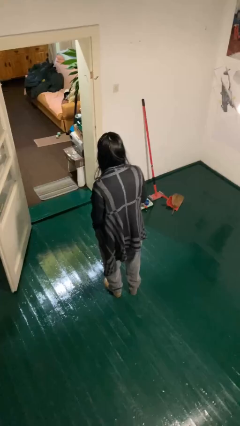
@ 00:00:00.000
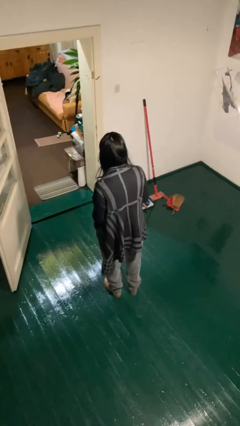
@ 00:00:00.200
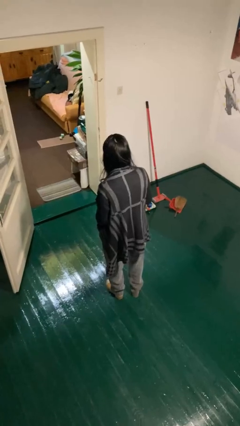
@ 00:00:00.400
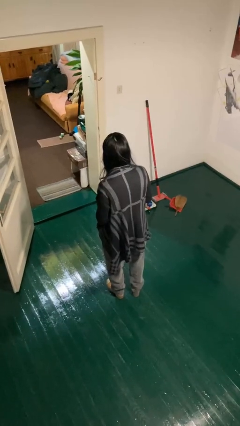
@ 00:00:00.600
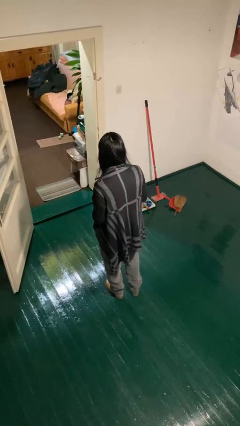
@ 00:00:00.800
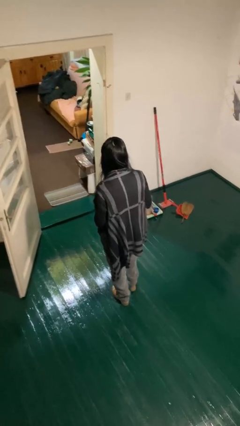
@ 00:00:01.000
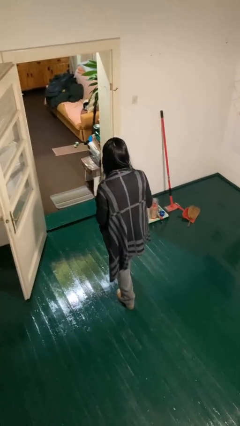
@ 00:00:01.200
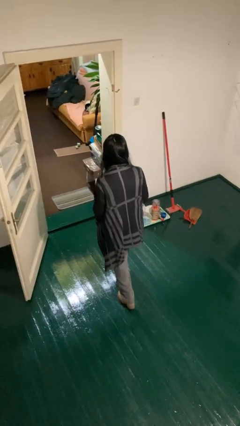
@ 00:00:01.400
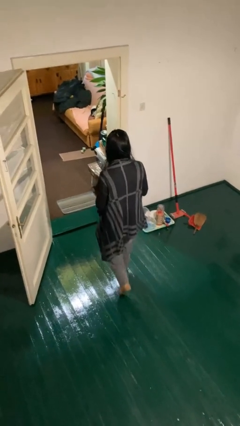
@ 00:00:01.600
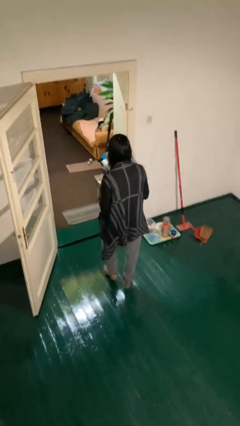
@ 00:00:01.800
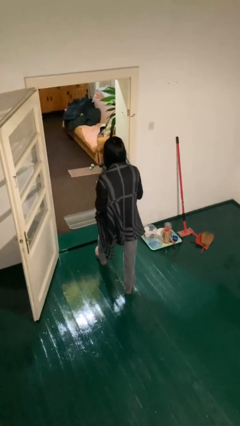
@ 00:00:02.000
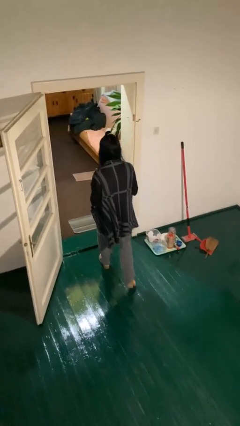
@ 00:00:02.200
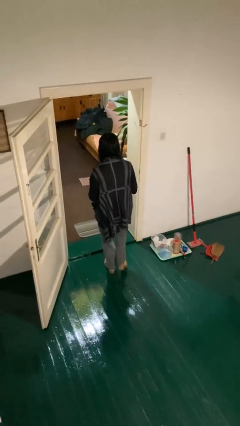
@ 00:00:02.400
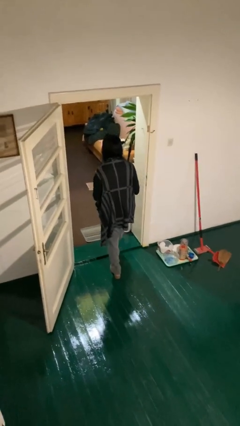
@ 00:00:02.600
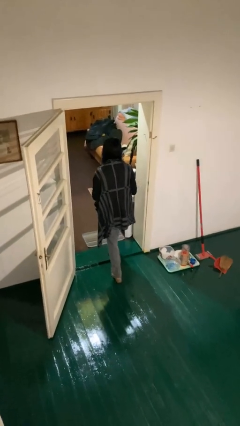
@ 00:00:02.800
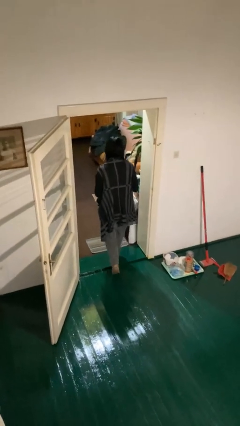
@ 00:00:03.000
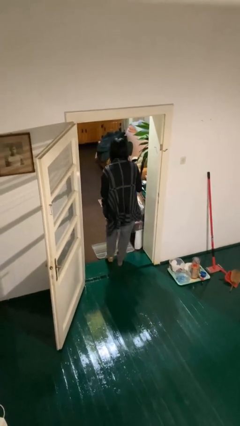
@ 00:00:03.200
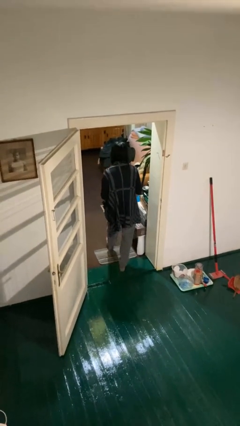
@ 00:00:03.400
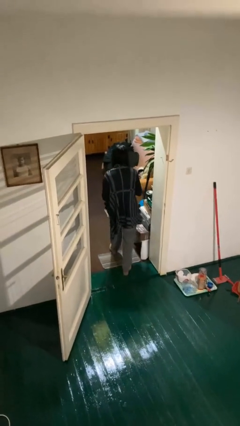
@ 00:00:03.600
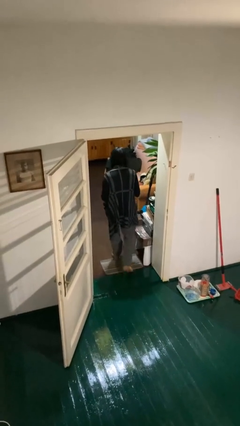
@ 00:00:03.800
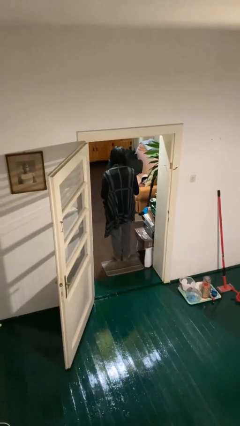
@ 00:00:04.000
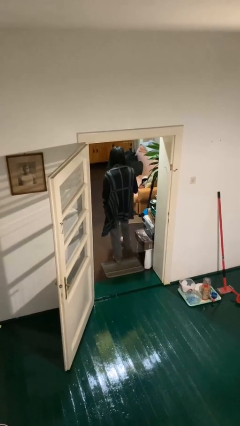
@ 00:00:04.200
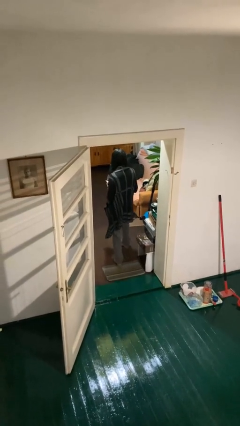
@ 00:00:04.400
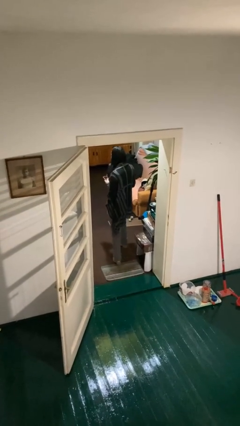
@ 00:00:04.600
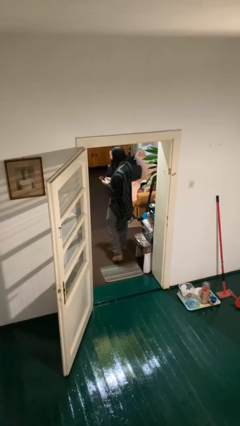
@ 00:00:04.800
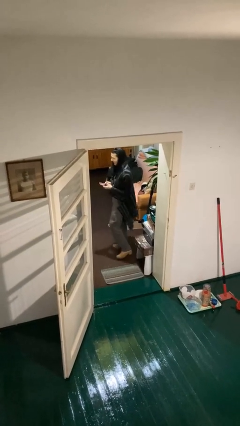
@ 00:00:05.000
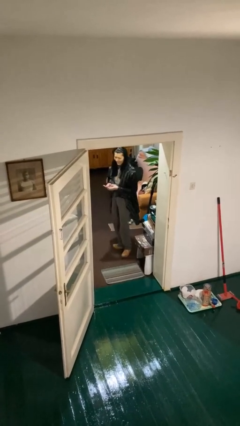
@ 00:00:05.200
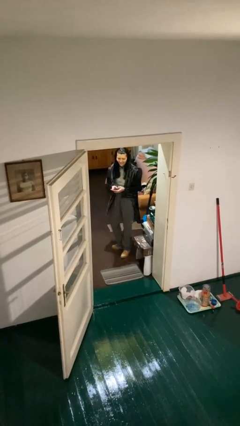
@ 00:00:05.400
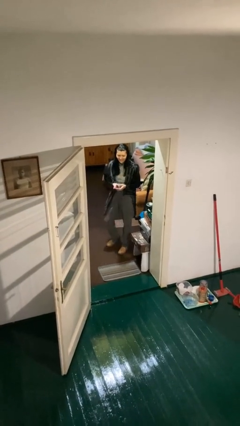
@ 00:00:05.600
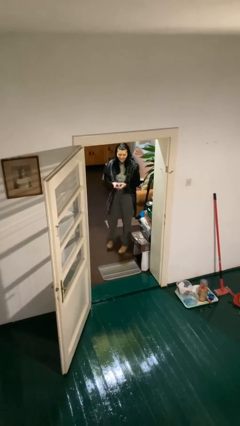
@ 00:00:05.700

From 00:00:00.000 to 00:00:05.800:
person exits scene through structure

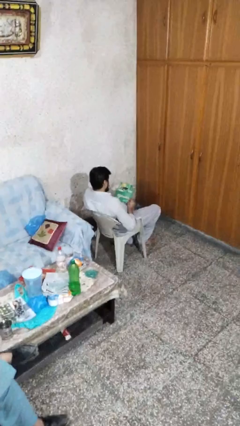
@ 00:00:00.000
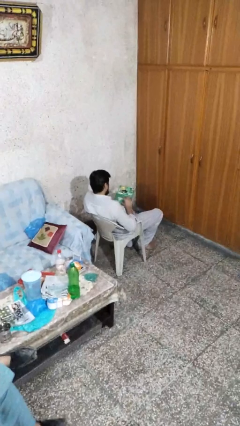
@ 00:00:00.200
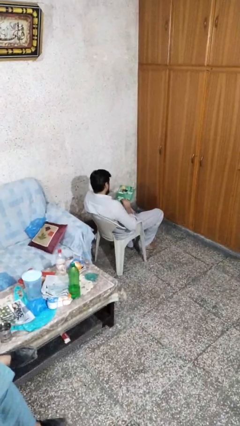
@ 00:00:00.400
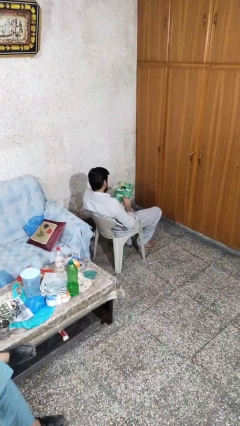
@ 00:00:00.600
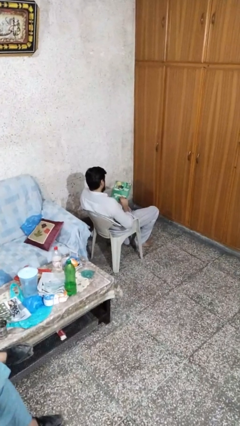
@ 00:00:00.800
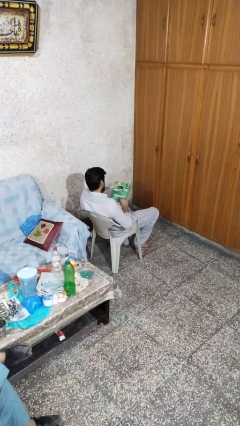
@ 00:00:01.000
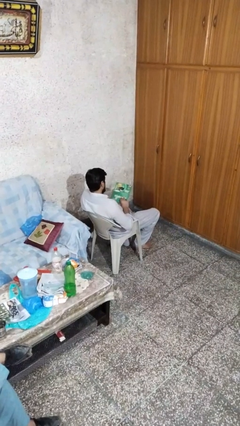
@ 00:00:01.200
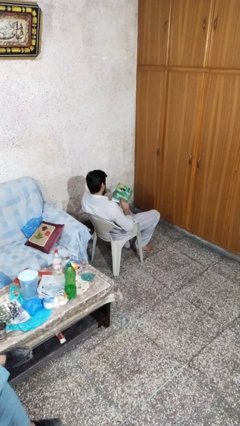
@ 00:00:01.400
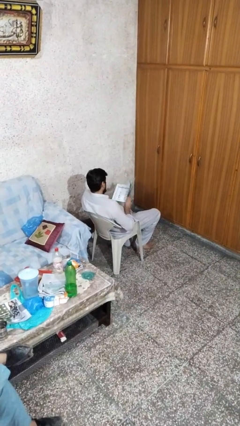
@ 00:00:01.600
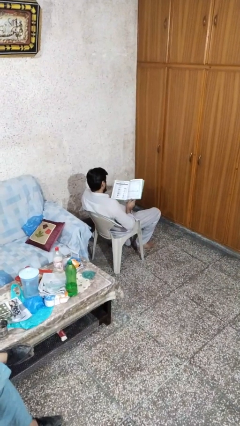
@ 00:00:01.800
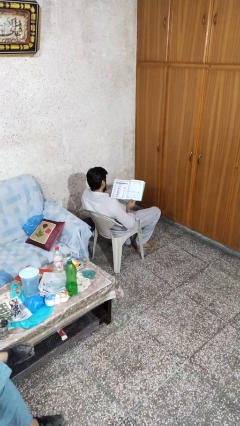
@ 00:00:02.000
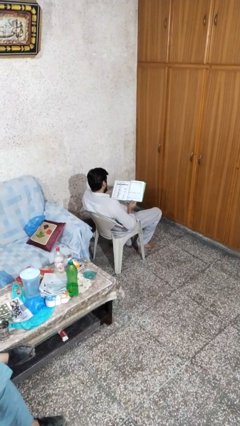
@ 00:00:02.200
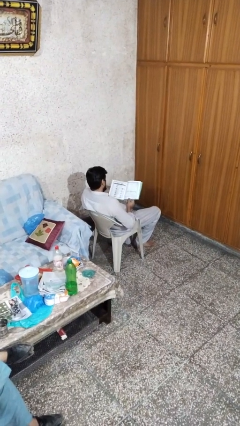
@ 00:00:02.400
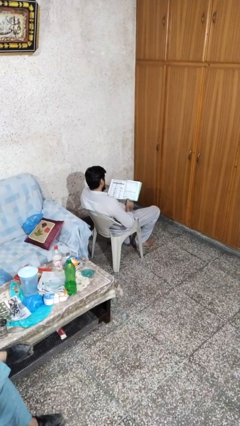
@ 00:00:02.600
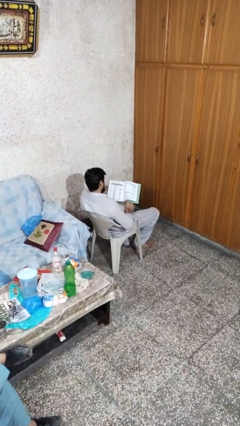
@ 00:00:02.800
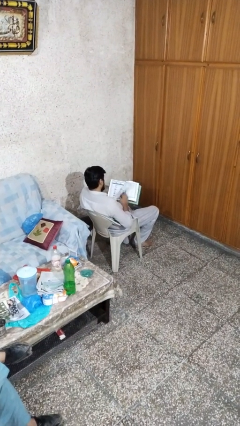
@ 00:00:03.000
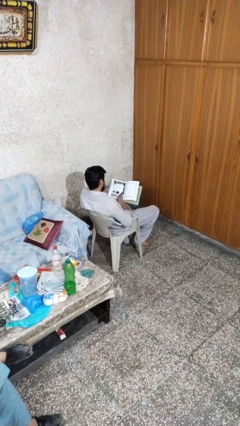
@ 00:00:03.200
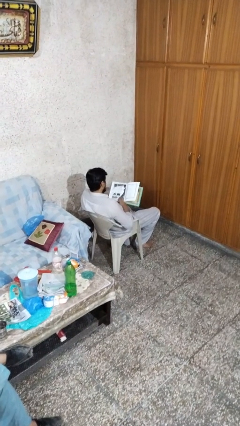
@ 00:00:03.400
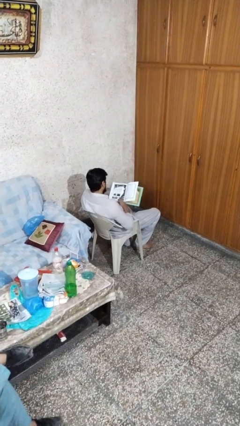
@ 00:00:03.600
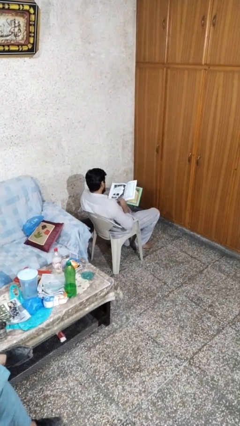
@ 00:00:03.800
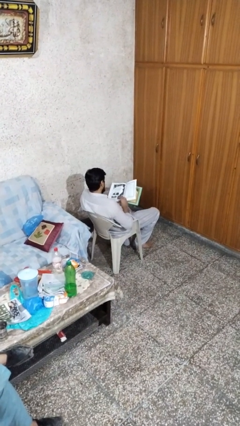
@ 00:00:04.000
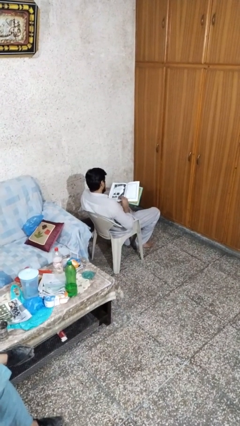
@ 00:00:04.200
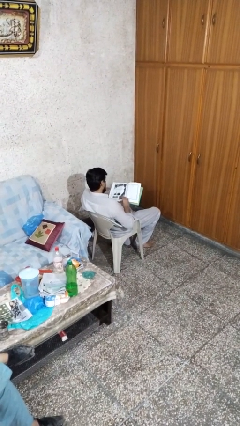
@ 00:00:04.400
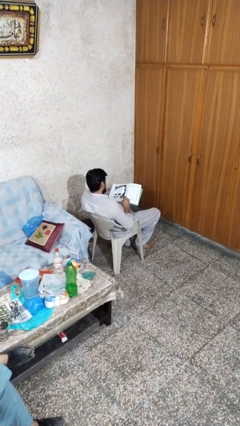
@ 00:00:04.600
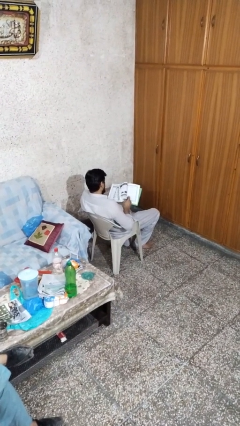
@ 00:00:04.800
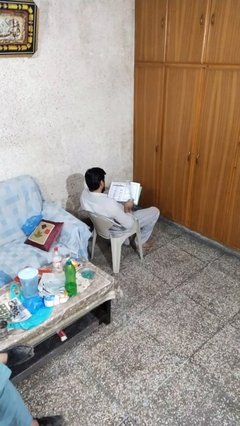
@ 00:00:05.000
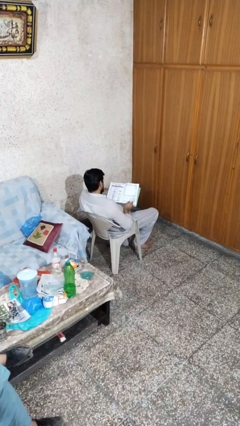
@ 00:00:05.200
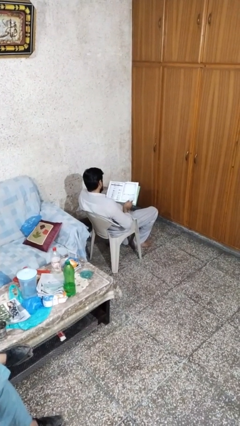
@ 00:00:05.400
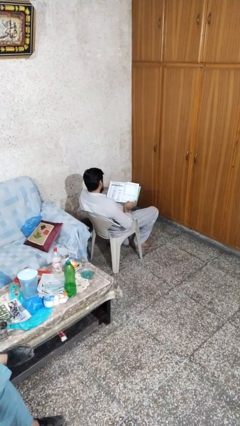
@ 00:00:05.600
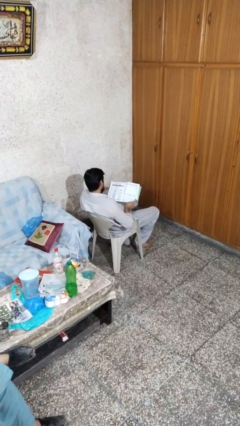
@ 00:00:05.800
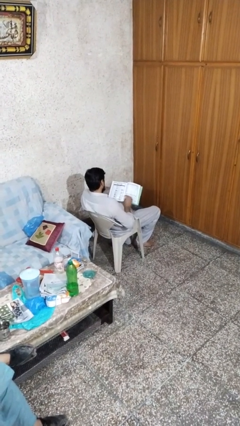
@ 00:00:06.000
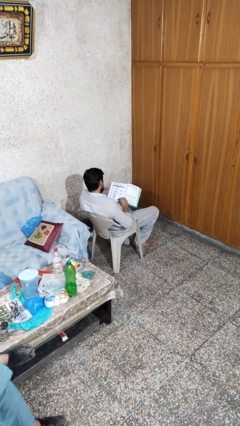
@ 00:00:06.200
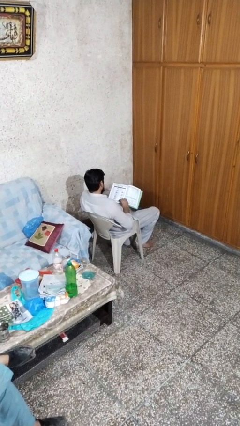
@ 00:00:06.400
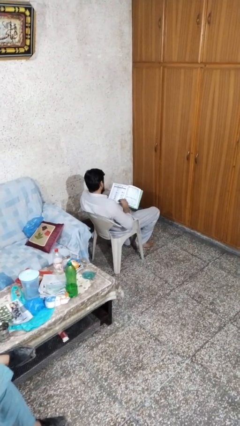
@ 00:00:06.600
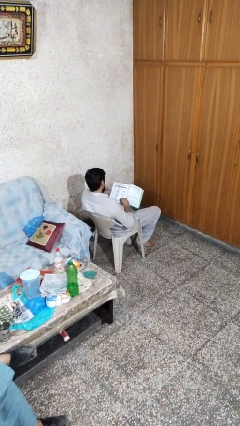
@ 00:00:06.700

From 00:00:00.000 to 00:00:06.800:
person reads book

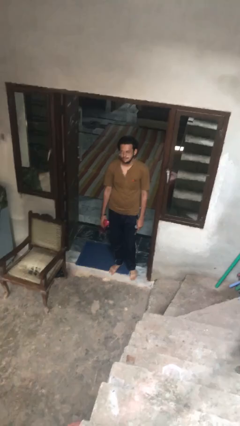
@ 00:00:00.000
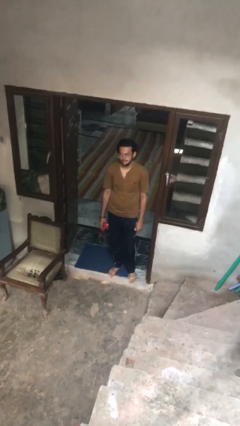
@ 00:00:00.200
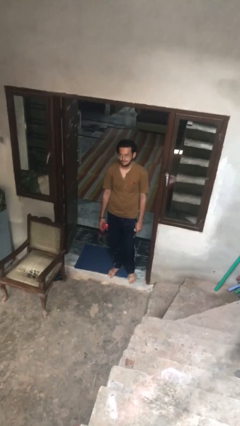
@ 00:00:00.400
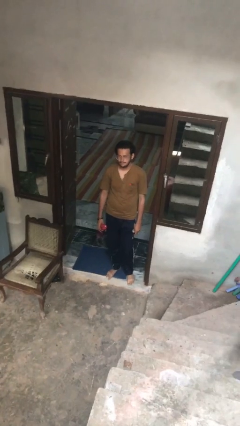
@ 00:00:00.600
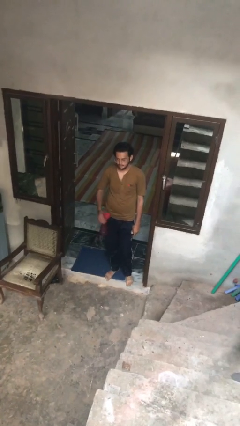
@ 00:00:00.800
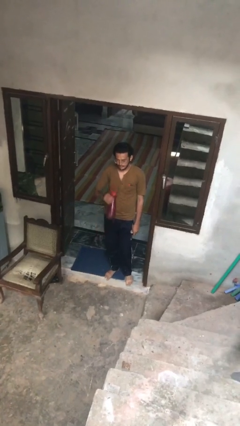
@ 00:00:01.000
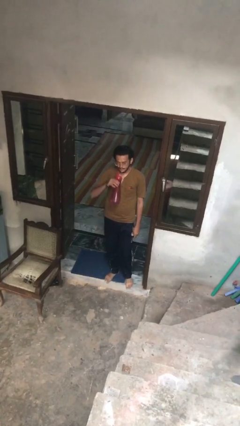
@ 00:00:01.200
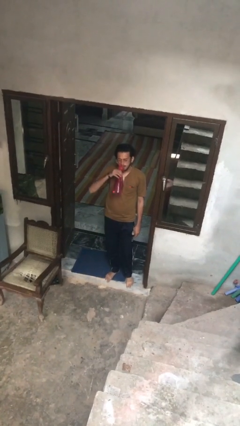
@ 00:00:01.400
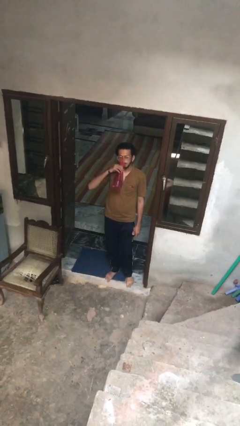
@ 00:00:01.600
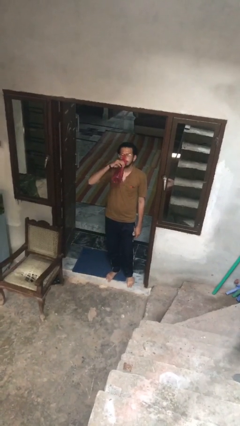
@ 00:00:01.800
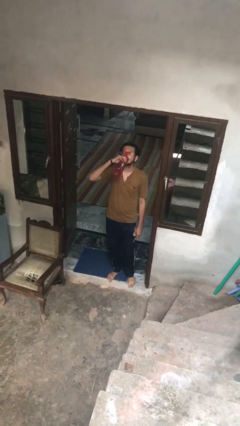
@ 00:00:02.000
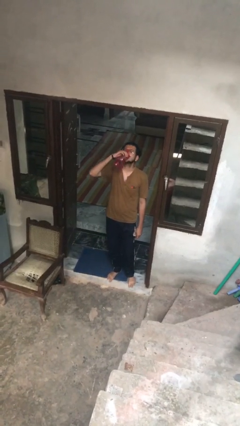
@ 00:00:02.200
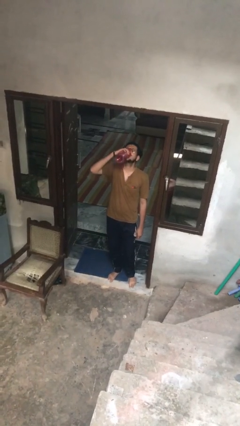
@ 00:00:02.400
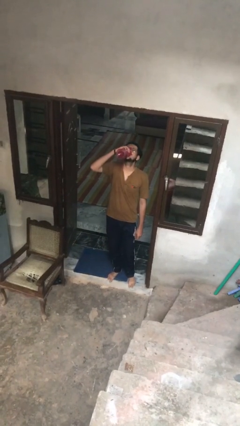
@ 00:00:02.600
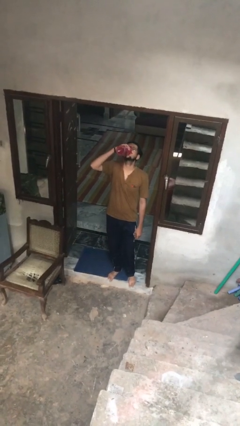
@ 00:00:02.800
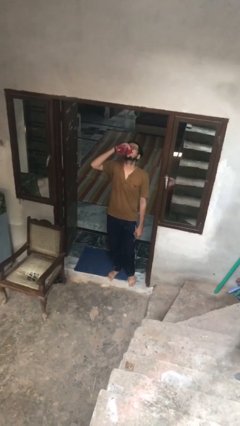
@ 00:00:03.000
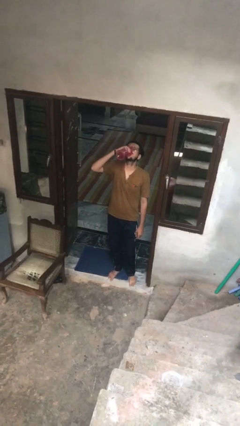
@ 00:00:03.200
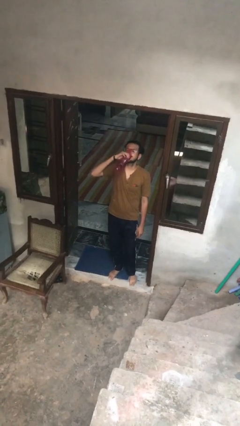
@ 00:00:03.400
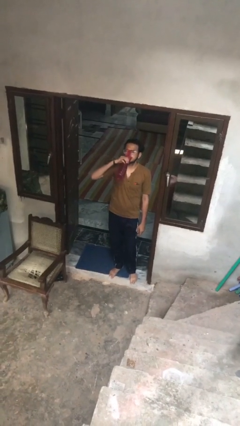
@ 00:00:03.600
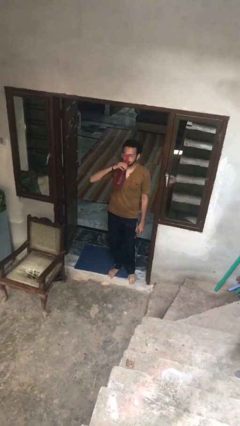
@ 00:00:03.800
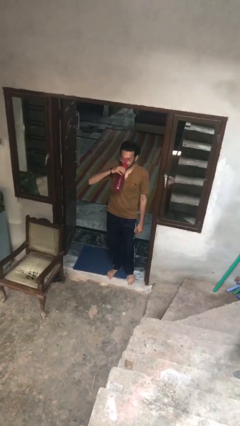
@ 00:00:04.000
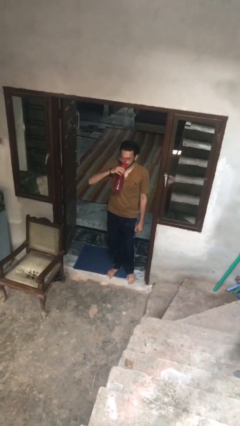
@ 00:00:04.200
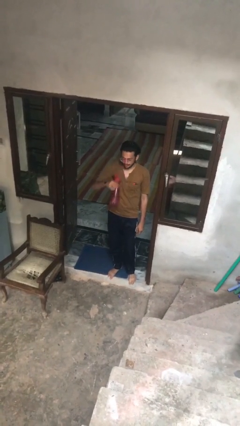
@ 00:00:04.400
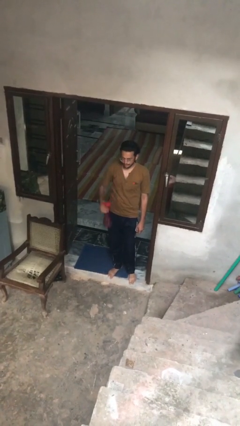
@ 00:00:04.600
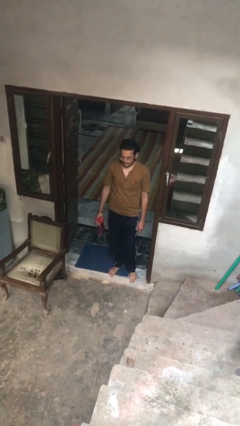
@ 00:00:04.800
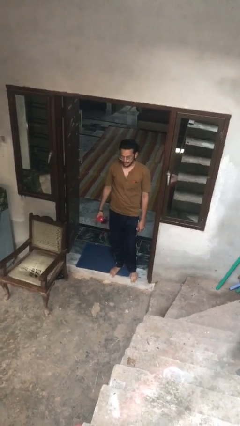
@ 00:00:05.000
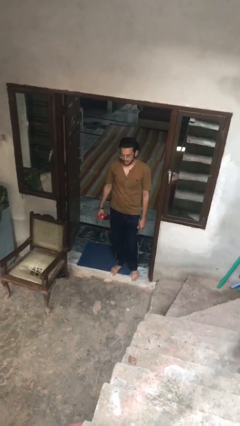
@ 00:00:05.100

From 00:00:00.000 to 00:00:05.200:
person drinks from bottle
